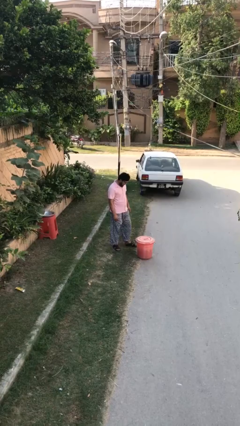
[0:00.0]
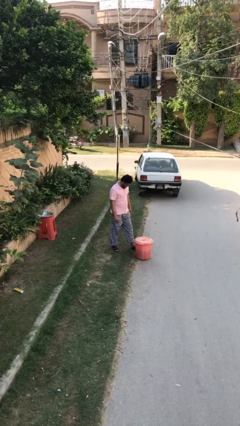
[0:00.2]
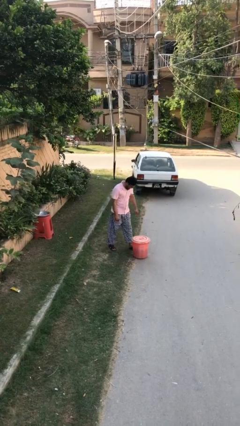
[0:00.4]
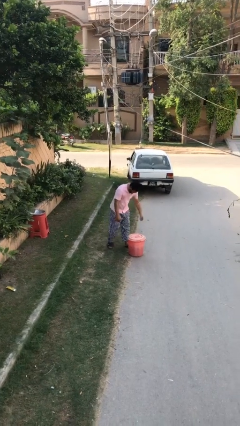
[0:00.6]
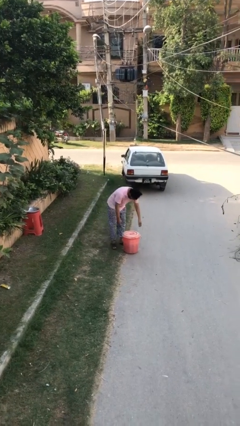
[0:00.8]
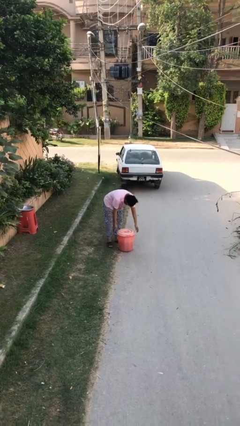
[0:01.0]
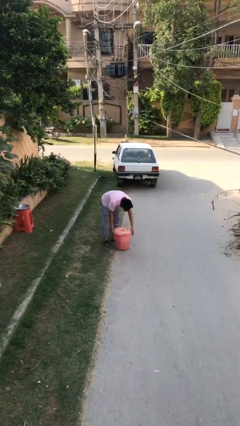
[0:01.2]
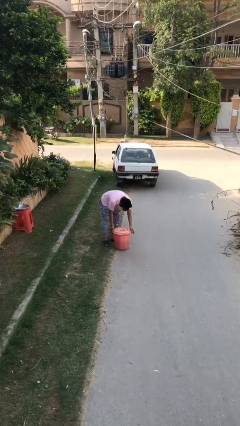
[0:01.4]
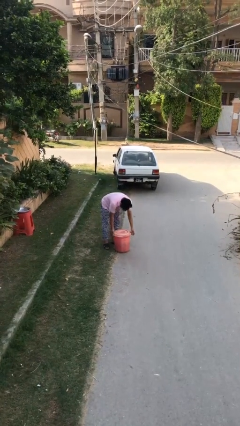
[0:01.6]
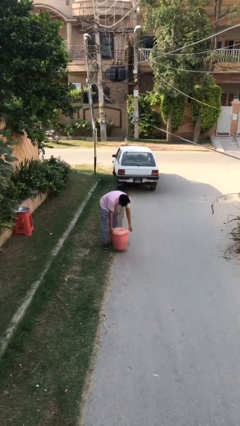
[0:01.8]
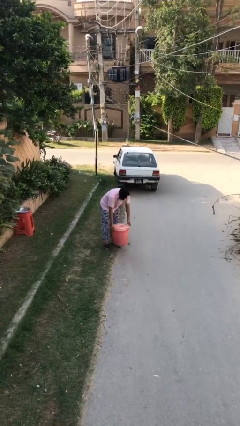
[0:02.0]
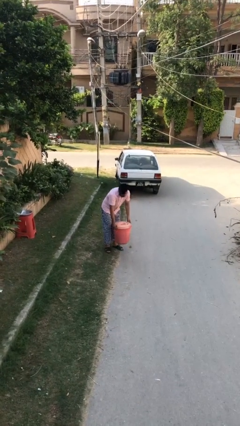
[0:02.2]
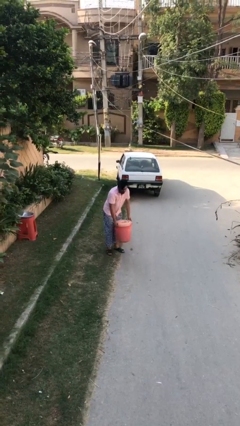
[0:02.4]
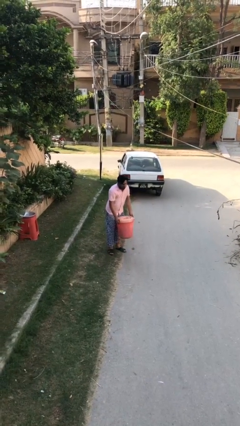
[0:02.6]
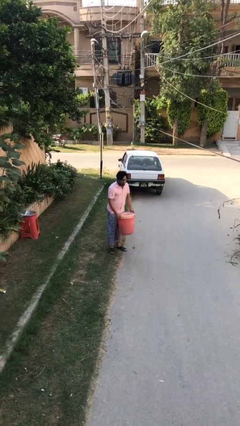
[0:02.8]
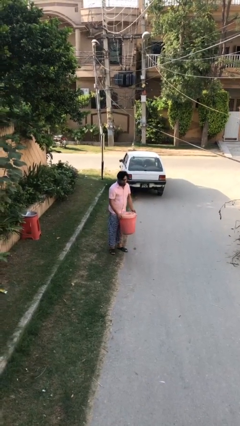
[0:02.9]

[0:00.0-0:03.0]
person picks up object from floor

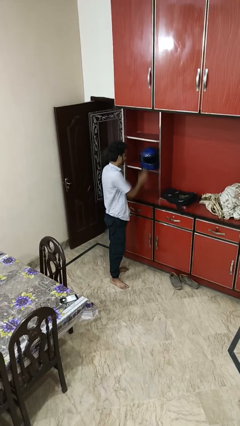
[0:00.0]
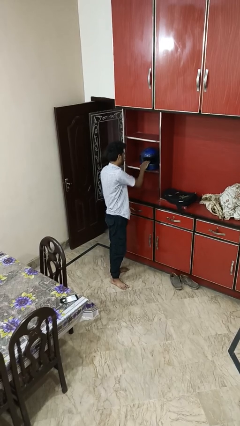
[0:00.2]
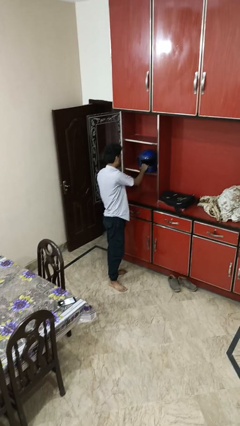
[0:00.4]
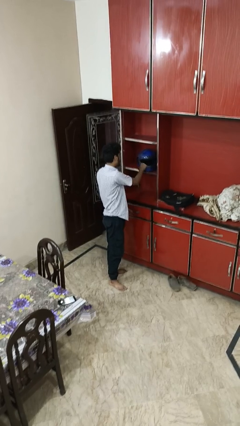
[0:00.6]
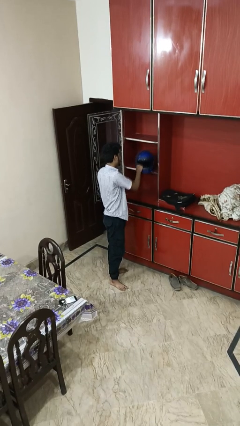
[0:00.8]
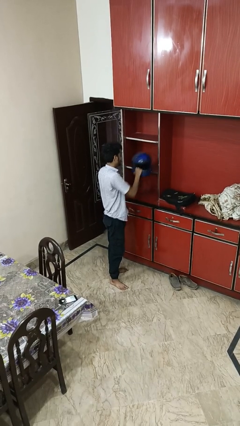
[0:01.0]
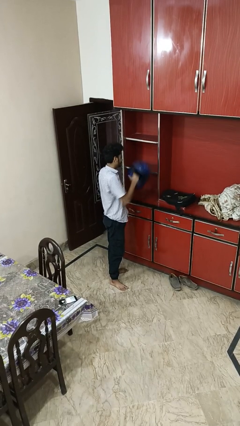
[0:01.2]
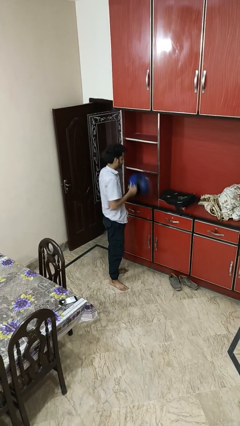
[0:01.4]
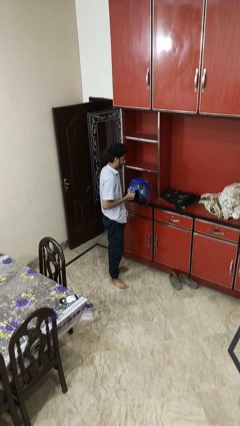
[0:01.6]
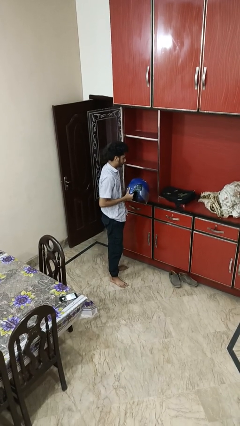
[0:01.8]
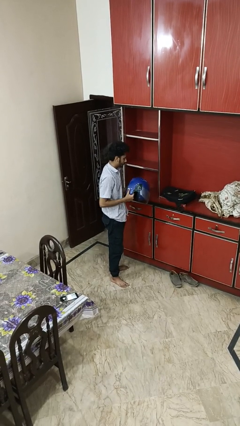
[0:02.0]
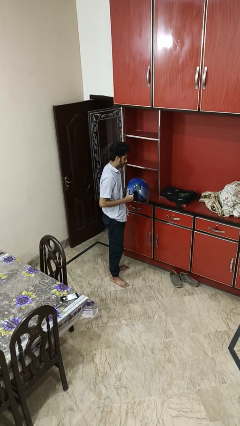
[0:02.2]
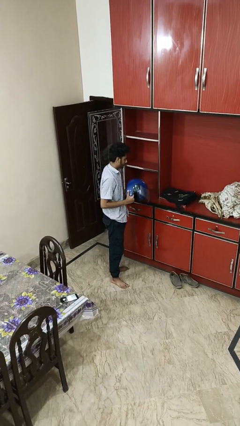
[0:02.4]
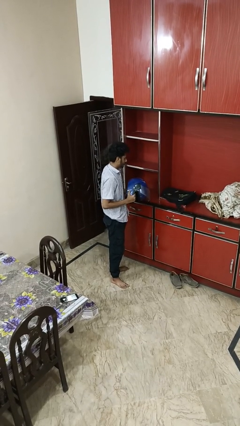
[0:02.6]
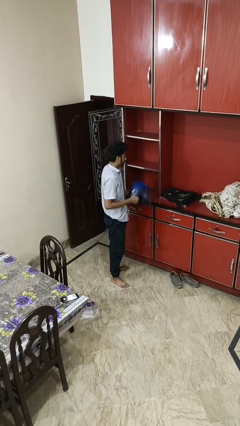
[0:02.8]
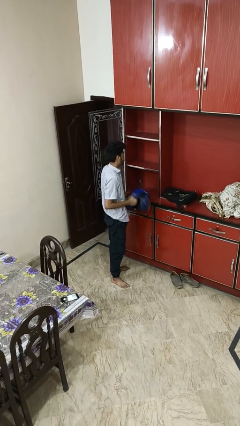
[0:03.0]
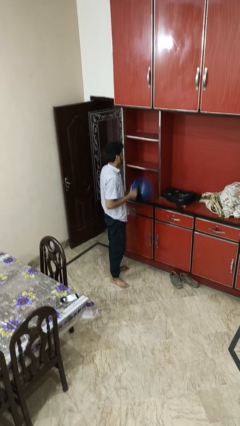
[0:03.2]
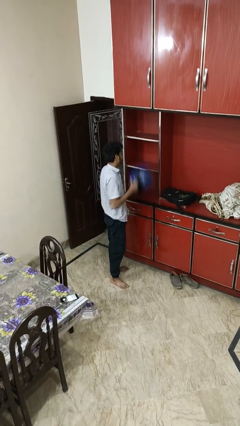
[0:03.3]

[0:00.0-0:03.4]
person picks up object from shelf

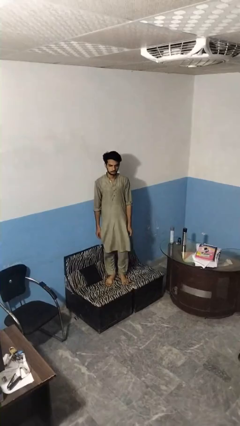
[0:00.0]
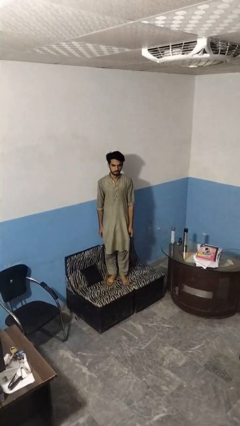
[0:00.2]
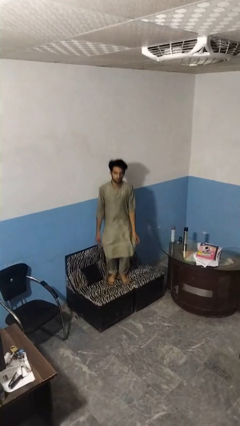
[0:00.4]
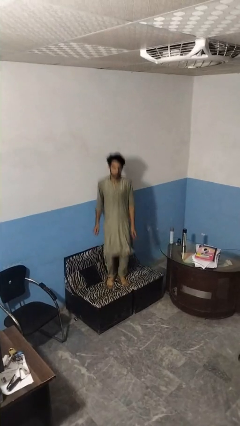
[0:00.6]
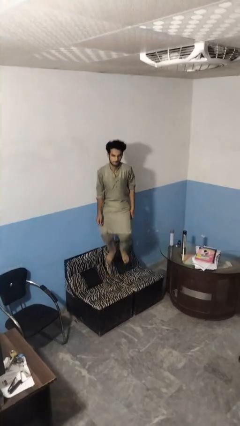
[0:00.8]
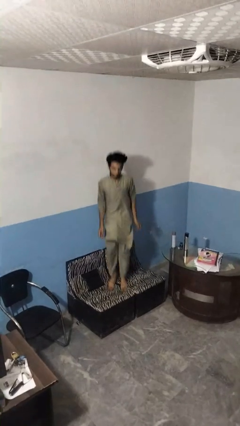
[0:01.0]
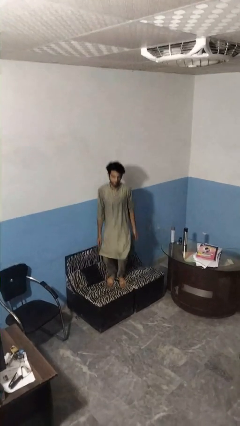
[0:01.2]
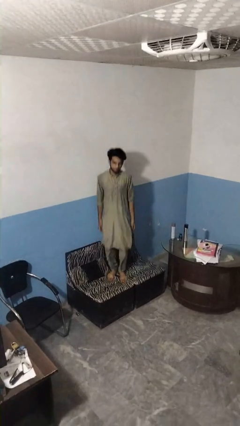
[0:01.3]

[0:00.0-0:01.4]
person jumps on couch

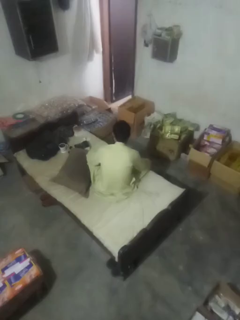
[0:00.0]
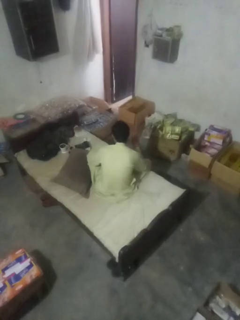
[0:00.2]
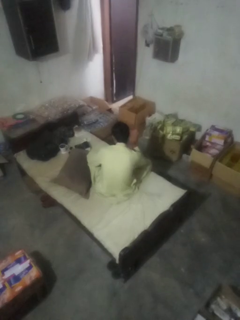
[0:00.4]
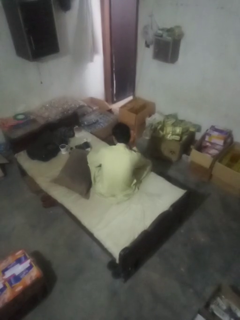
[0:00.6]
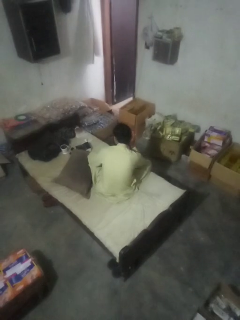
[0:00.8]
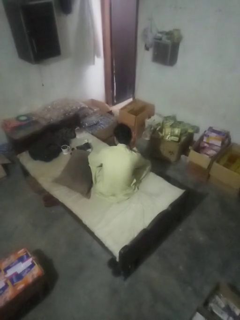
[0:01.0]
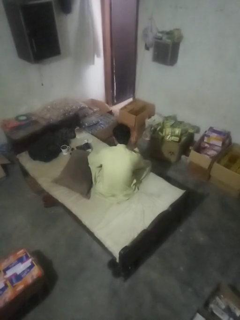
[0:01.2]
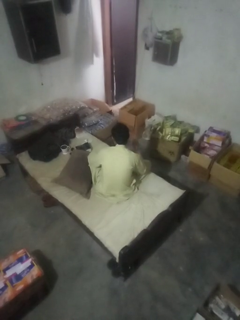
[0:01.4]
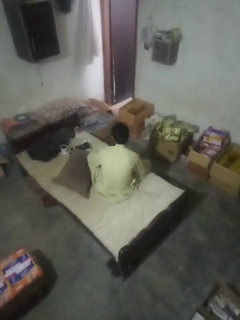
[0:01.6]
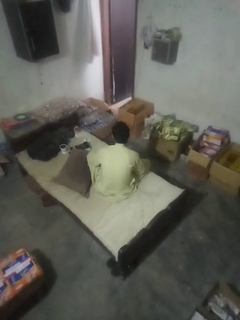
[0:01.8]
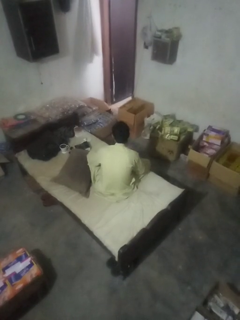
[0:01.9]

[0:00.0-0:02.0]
person gestures listen closely

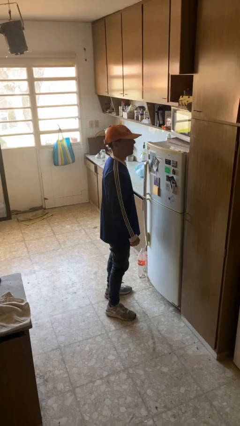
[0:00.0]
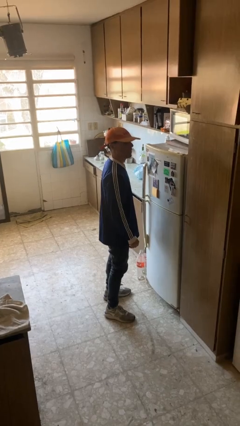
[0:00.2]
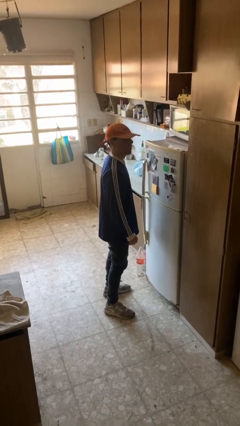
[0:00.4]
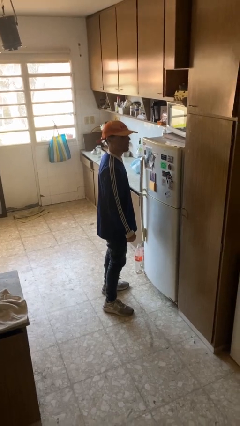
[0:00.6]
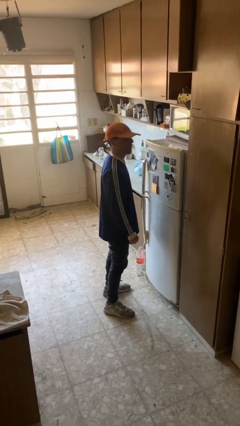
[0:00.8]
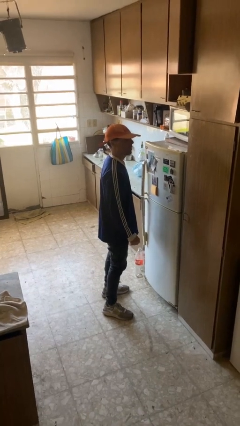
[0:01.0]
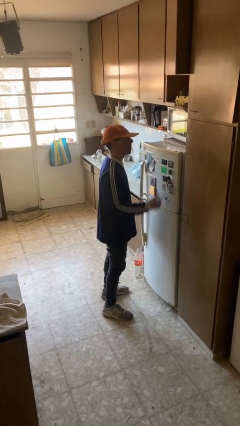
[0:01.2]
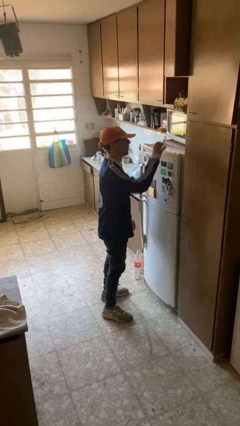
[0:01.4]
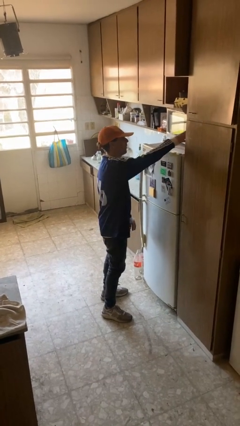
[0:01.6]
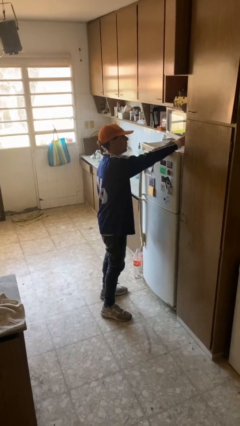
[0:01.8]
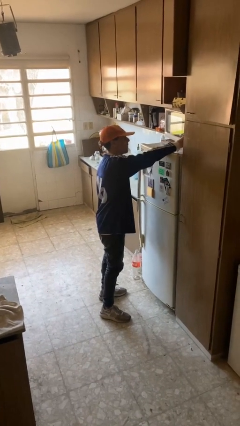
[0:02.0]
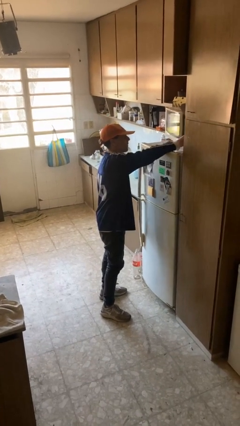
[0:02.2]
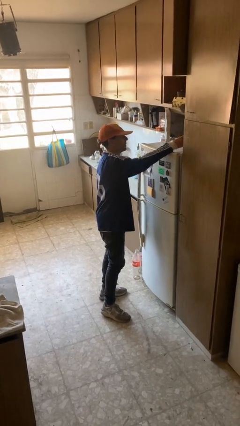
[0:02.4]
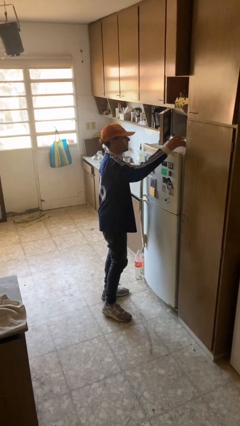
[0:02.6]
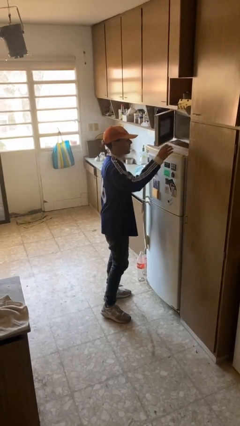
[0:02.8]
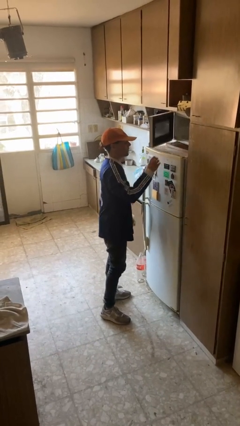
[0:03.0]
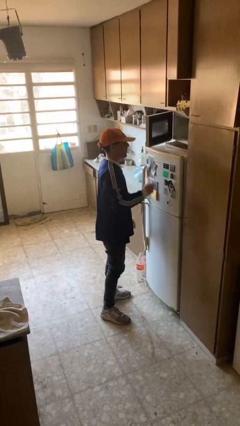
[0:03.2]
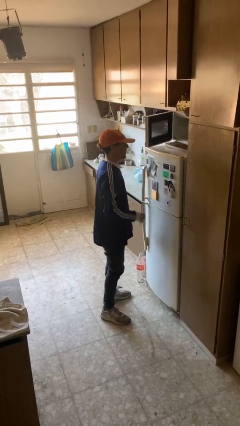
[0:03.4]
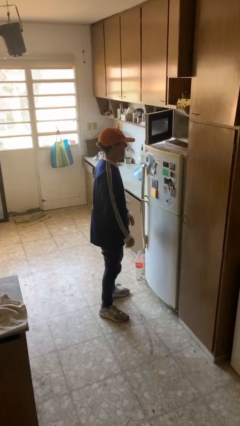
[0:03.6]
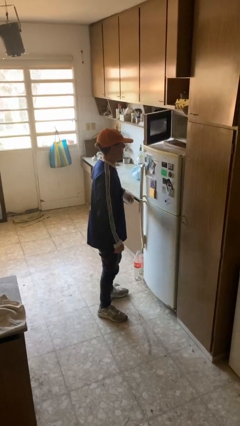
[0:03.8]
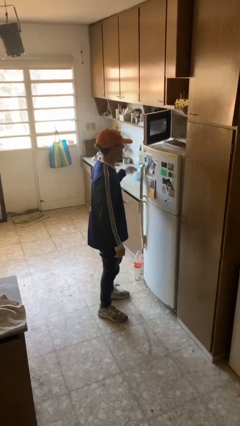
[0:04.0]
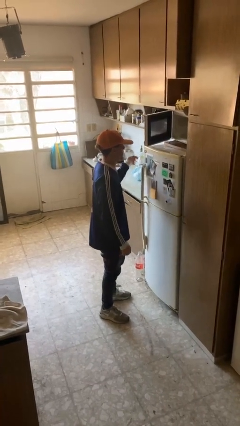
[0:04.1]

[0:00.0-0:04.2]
person opens microwave

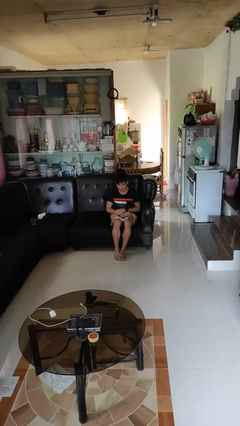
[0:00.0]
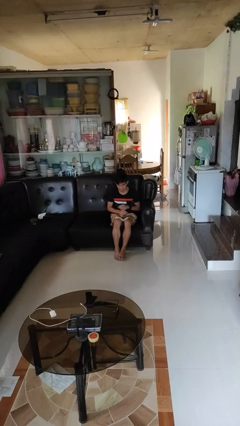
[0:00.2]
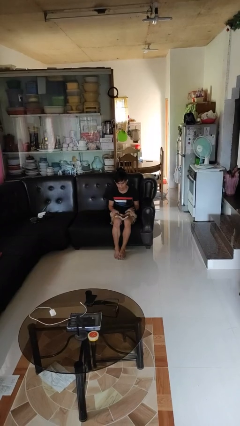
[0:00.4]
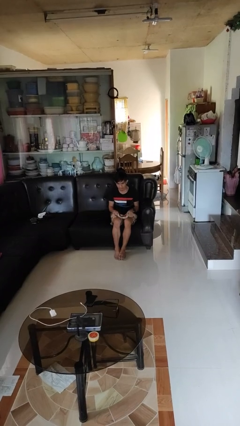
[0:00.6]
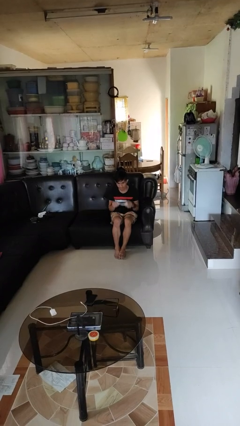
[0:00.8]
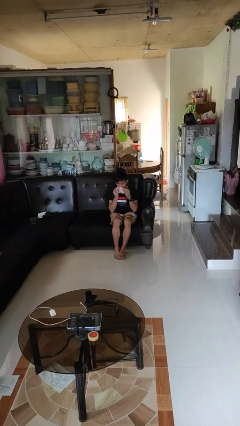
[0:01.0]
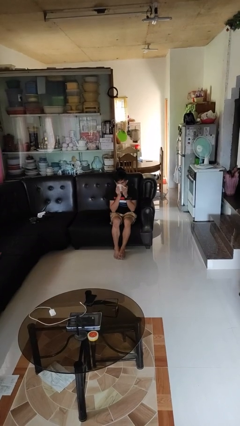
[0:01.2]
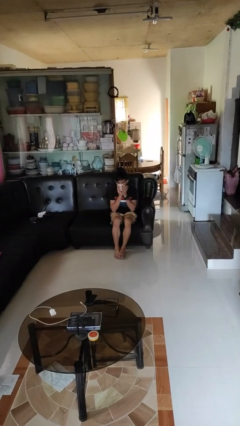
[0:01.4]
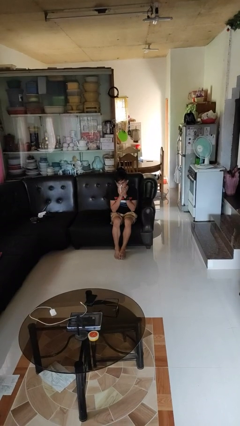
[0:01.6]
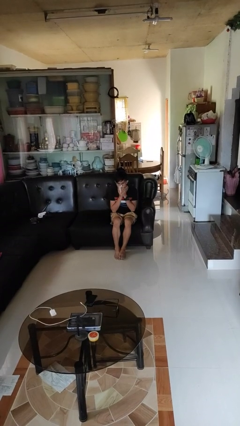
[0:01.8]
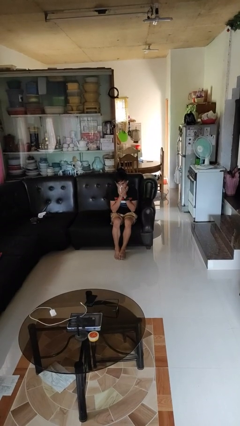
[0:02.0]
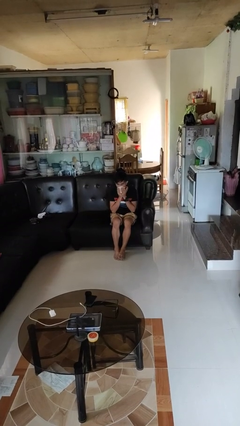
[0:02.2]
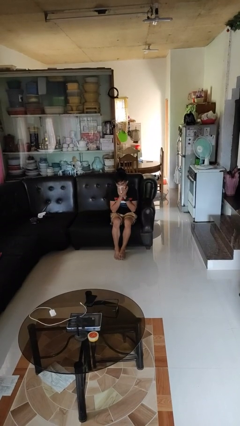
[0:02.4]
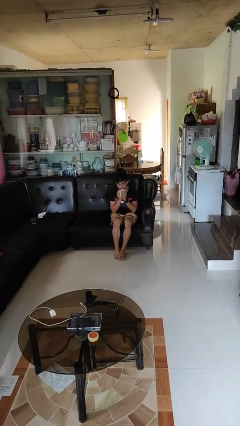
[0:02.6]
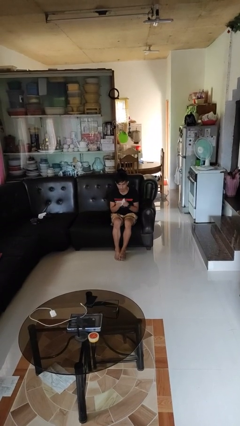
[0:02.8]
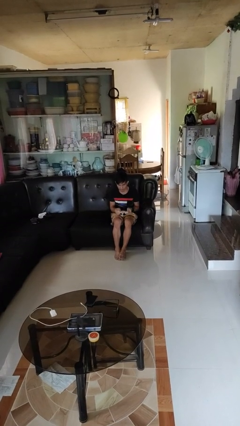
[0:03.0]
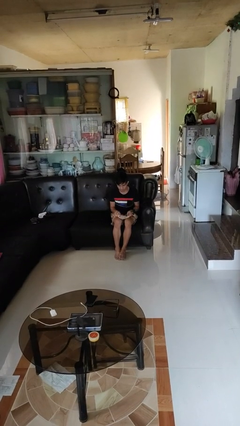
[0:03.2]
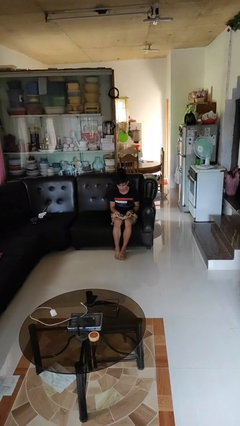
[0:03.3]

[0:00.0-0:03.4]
person wipes mouth with napkin

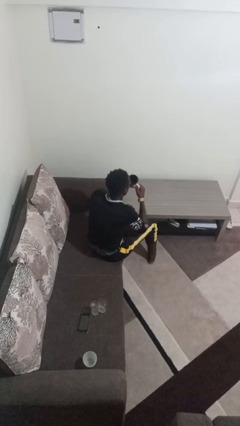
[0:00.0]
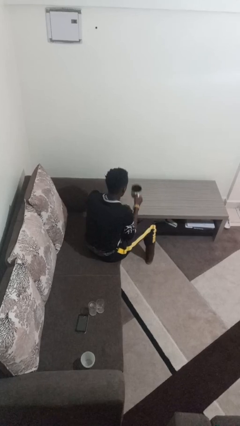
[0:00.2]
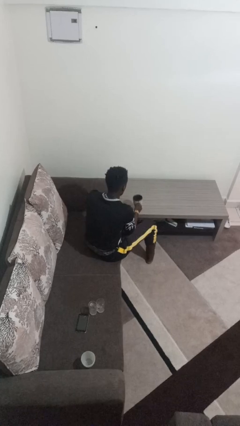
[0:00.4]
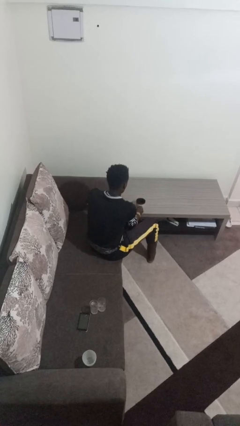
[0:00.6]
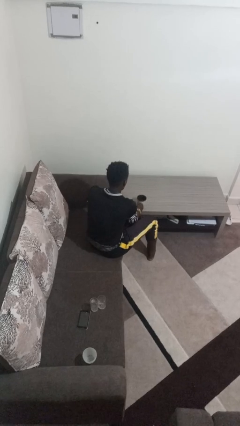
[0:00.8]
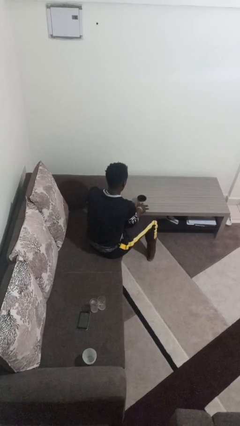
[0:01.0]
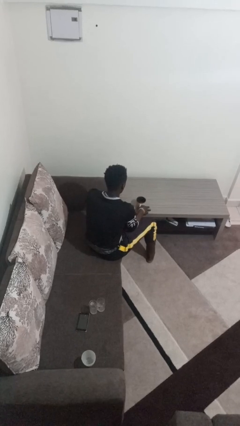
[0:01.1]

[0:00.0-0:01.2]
person puts down object on table
